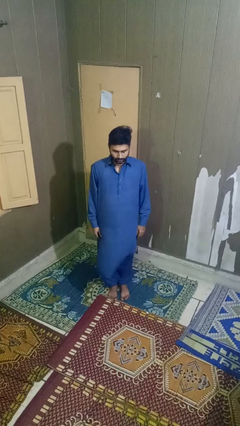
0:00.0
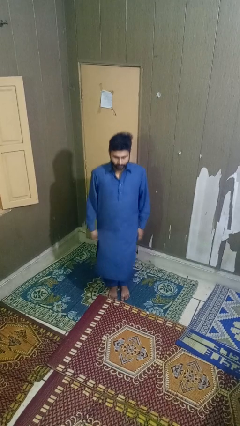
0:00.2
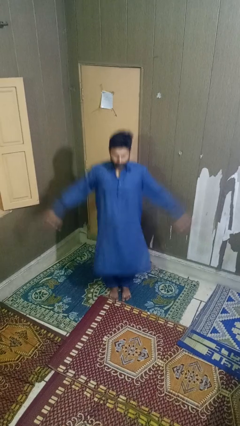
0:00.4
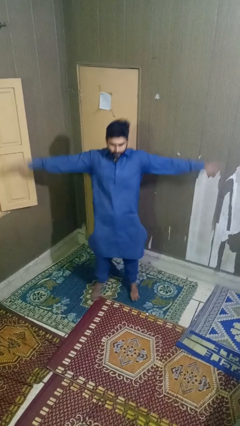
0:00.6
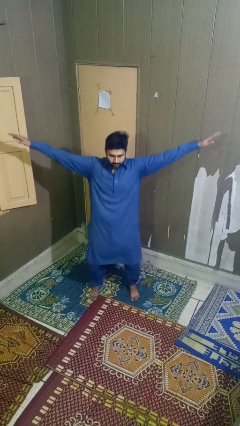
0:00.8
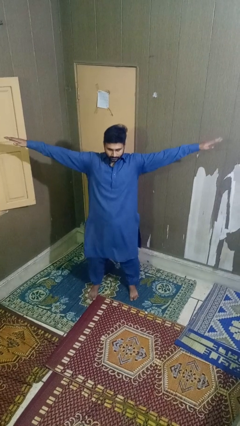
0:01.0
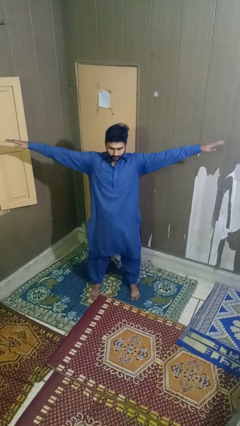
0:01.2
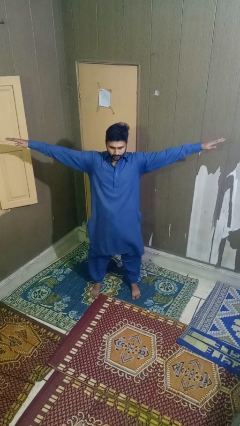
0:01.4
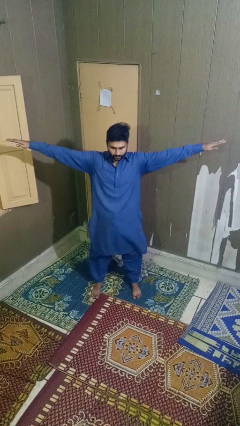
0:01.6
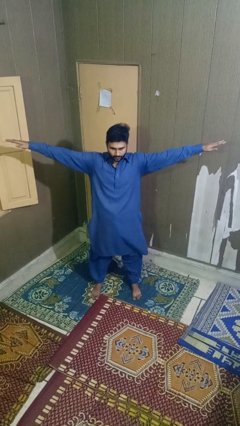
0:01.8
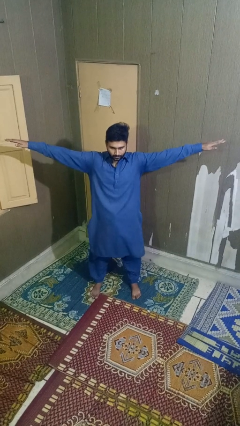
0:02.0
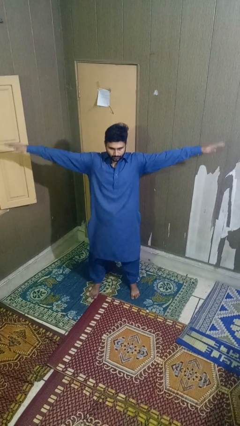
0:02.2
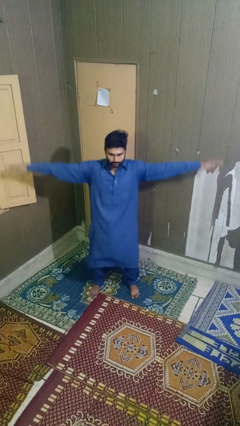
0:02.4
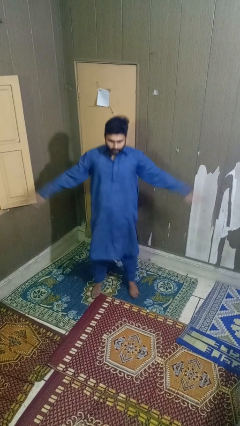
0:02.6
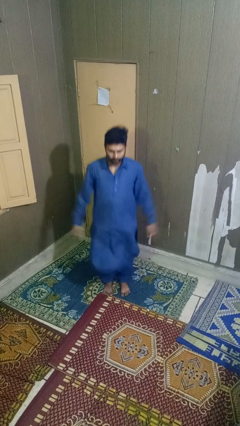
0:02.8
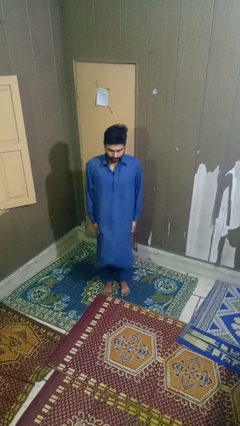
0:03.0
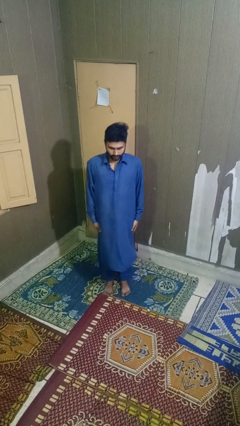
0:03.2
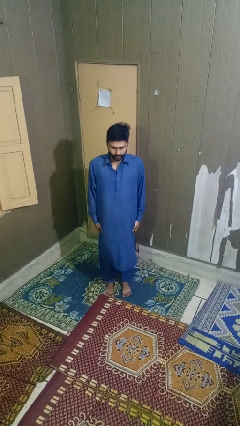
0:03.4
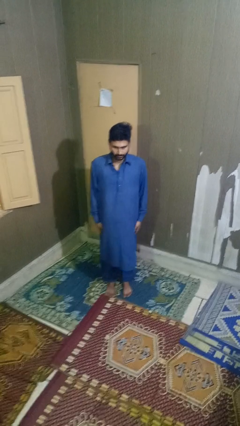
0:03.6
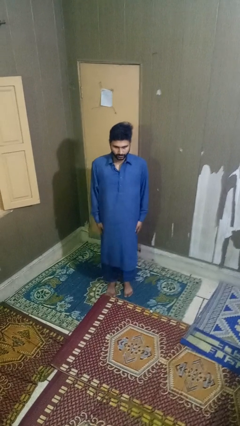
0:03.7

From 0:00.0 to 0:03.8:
person exercises with jumping jacks

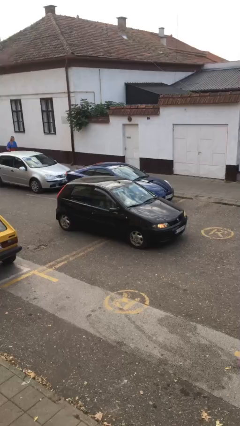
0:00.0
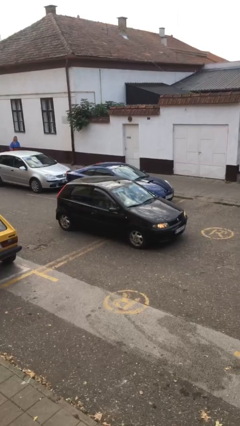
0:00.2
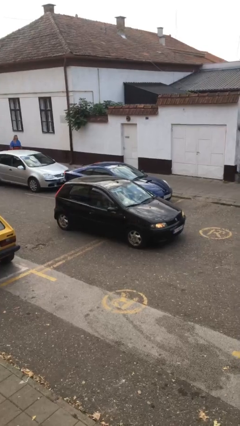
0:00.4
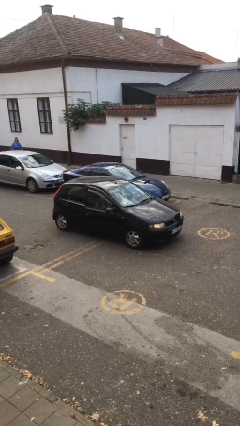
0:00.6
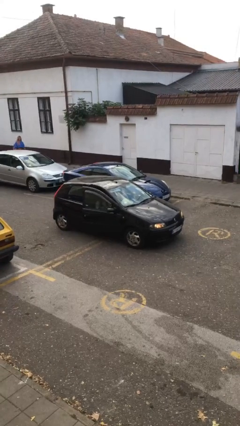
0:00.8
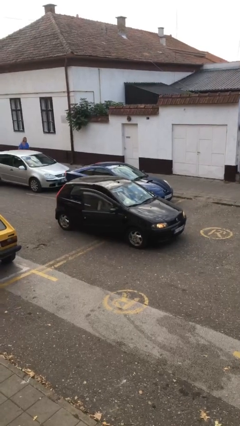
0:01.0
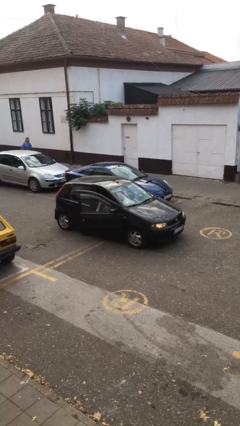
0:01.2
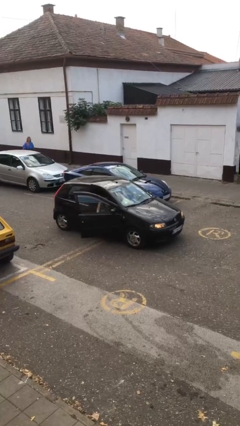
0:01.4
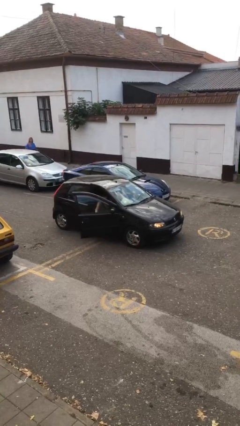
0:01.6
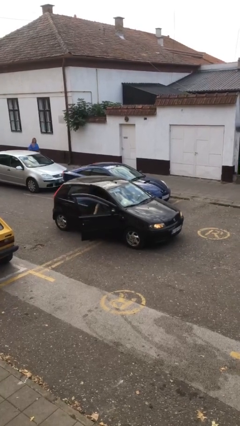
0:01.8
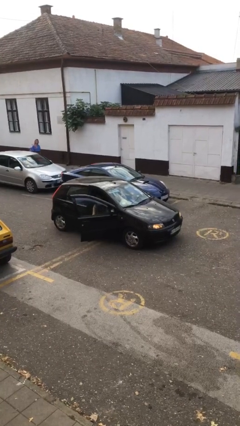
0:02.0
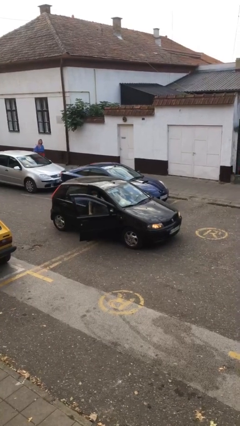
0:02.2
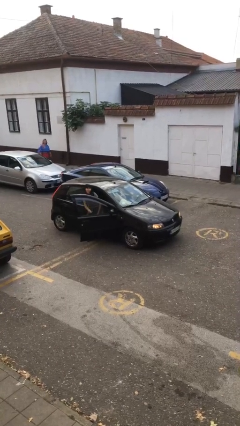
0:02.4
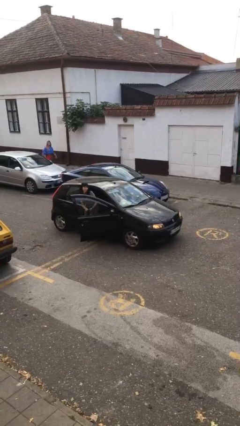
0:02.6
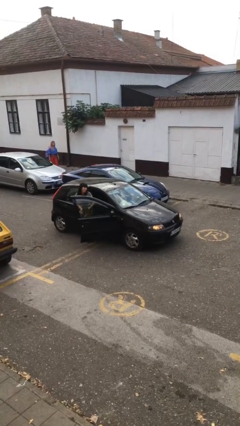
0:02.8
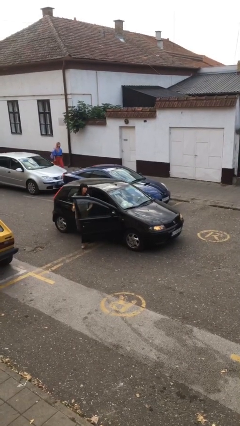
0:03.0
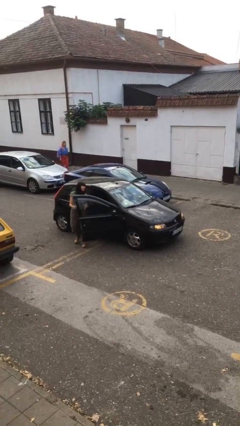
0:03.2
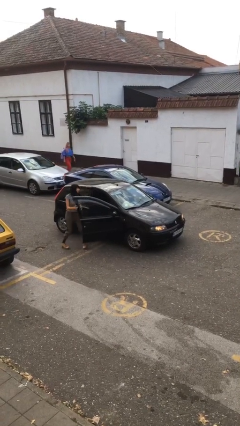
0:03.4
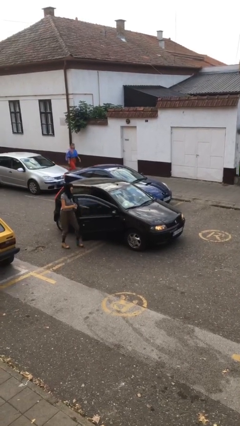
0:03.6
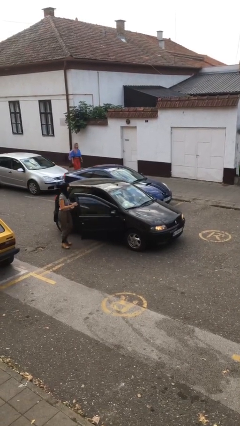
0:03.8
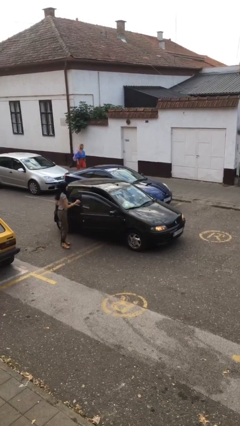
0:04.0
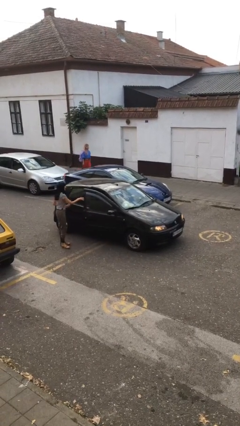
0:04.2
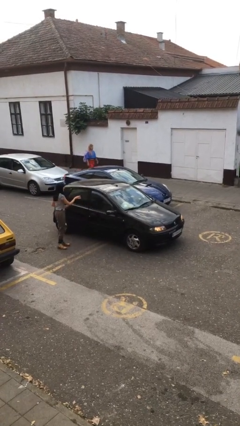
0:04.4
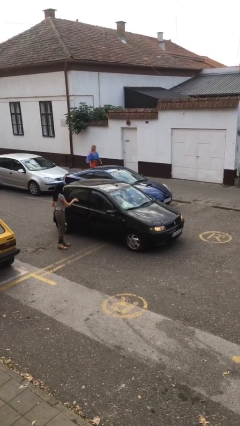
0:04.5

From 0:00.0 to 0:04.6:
car drops off person

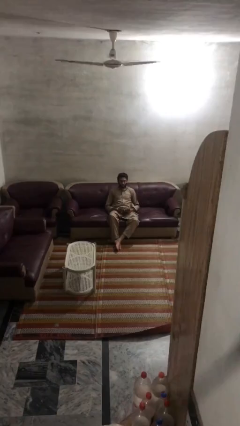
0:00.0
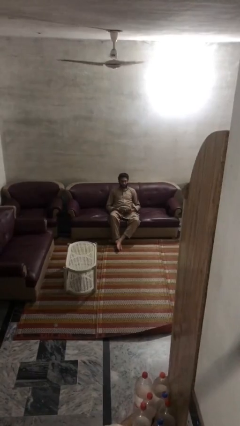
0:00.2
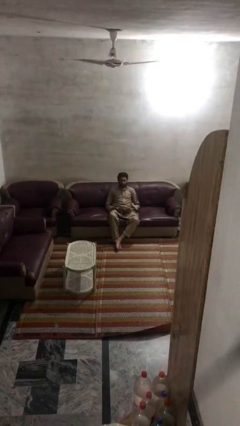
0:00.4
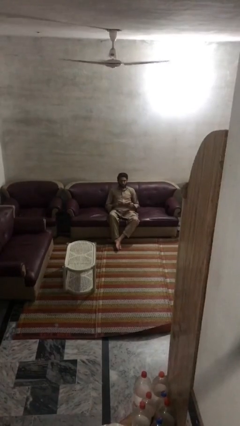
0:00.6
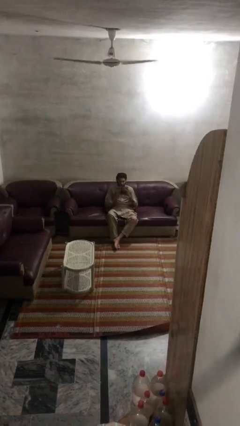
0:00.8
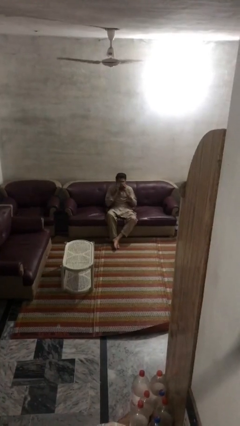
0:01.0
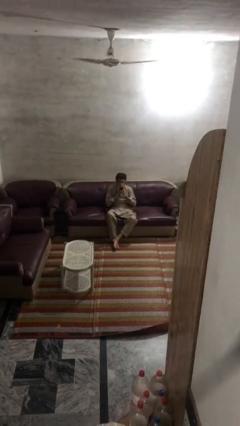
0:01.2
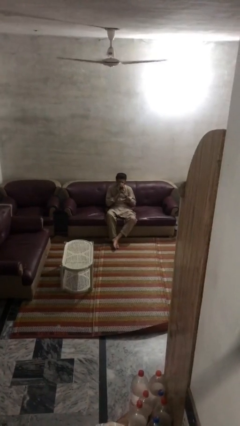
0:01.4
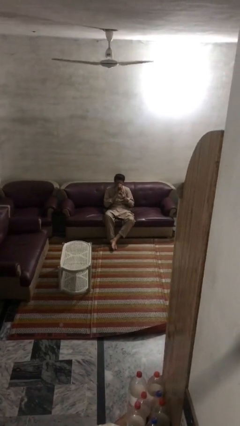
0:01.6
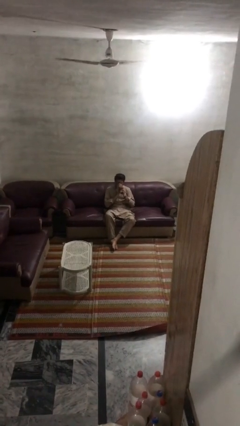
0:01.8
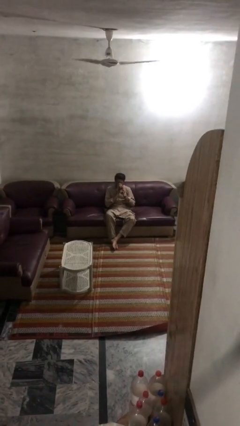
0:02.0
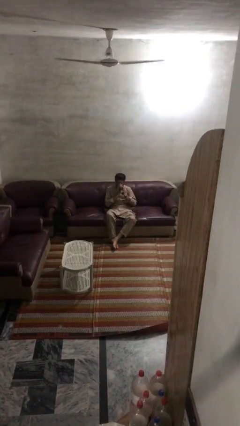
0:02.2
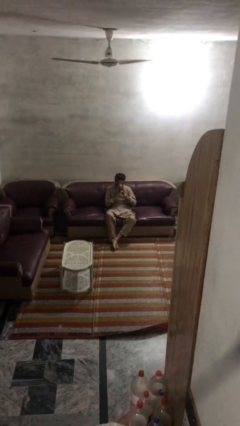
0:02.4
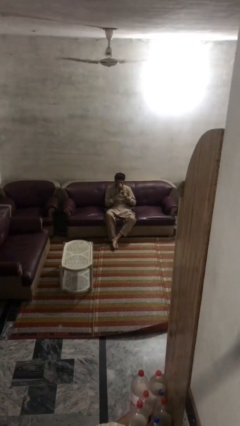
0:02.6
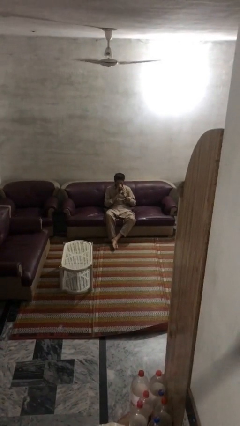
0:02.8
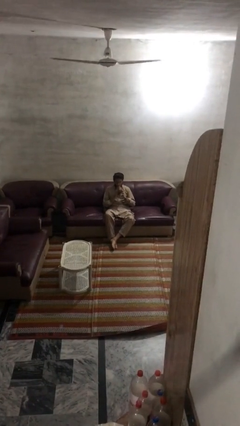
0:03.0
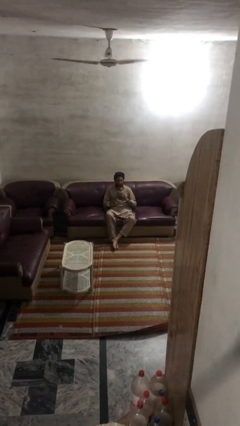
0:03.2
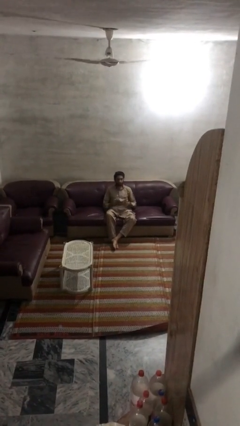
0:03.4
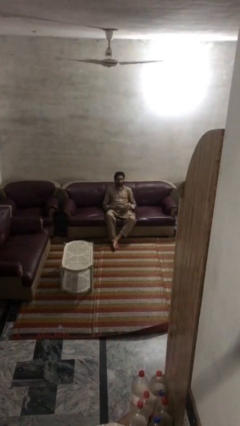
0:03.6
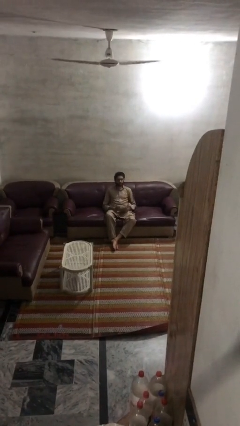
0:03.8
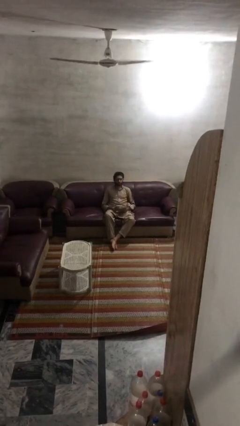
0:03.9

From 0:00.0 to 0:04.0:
person blows nose

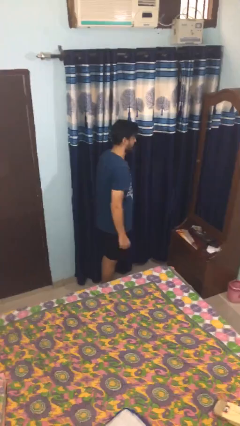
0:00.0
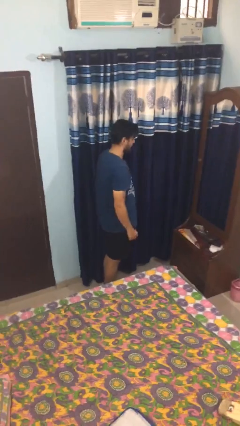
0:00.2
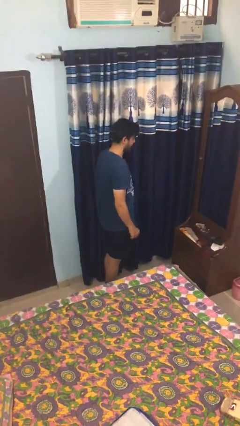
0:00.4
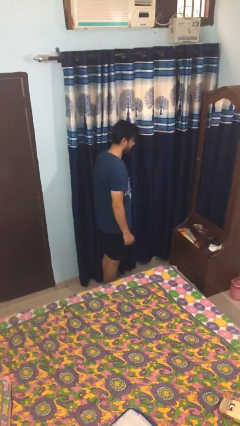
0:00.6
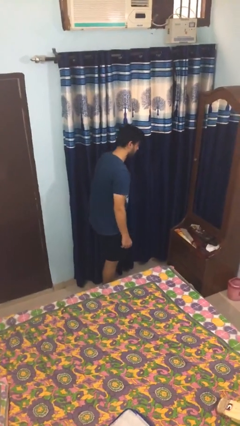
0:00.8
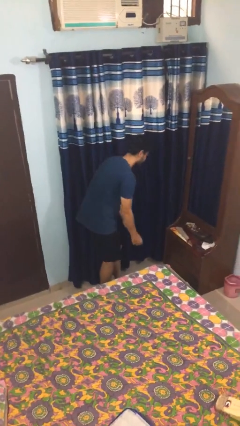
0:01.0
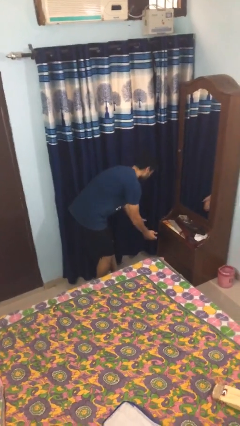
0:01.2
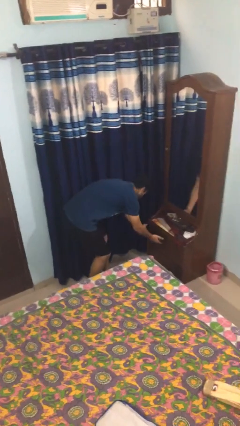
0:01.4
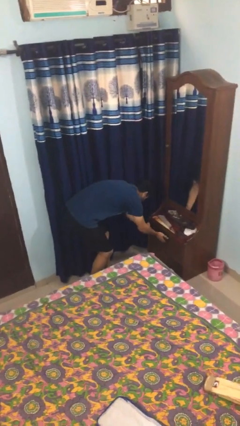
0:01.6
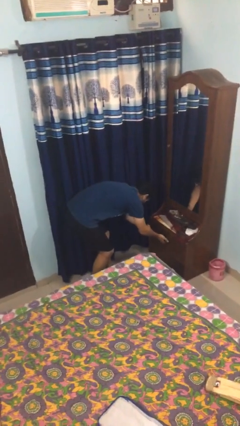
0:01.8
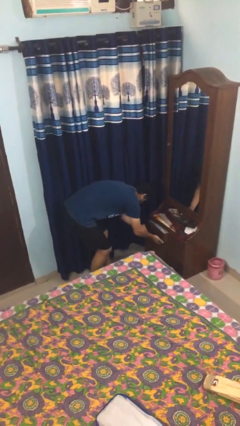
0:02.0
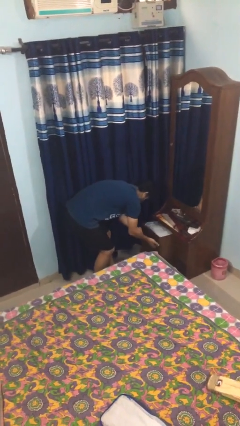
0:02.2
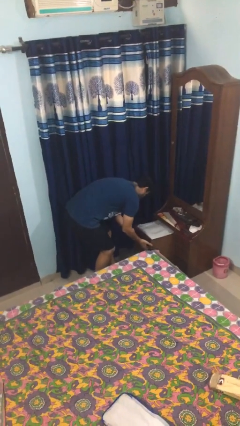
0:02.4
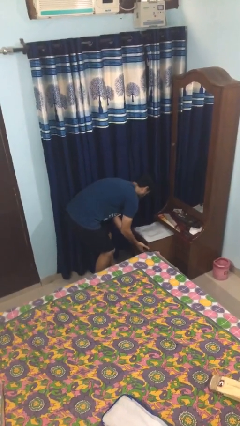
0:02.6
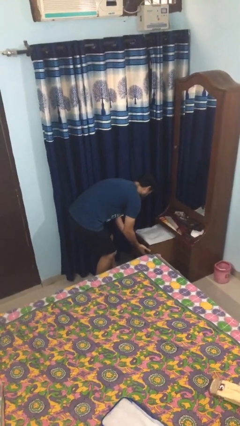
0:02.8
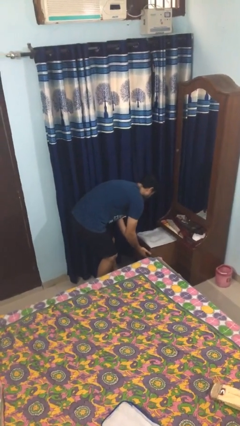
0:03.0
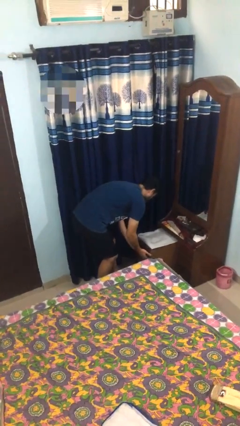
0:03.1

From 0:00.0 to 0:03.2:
person opens dresser drawer

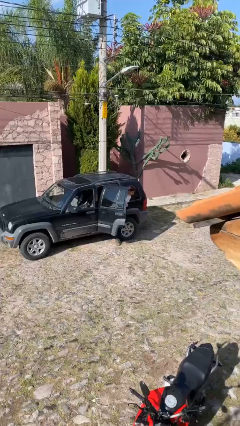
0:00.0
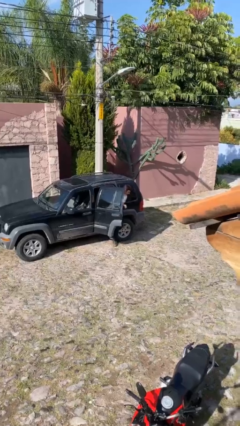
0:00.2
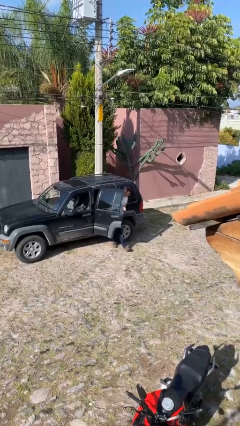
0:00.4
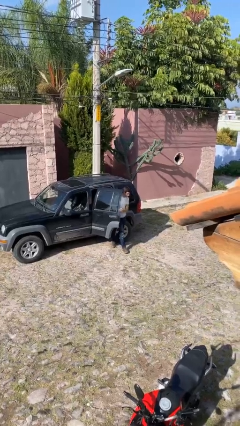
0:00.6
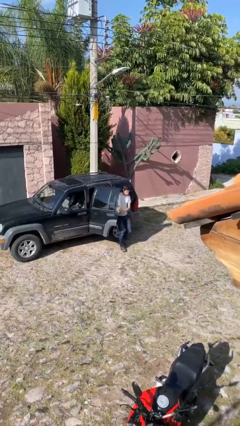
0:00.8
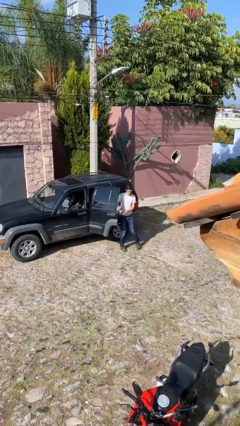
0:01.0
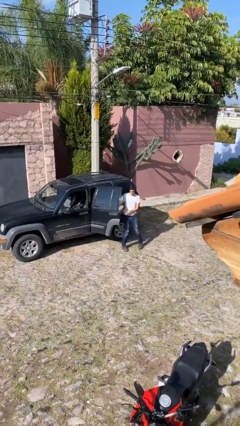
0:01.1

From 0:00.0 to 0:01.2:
person exits car

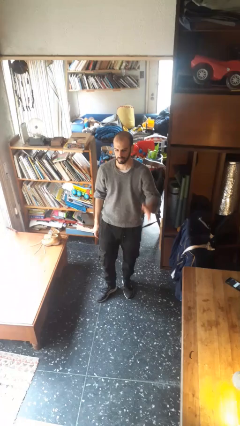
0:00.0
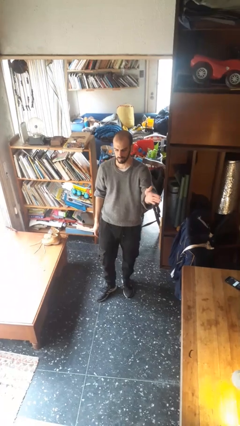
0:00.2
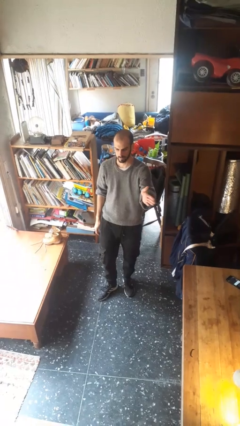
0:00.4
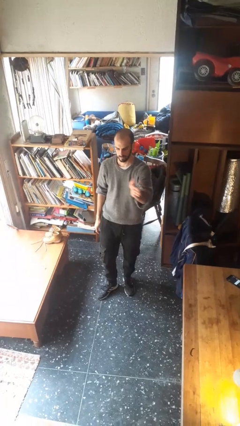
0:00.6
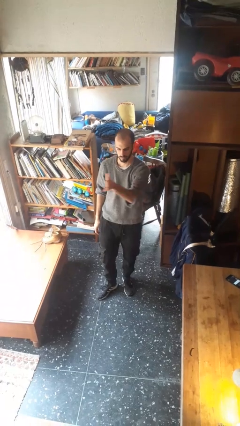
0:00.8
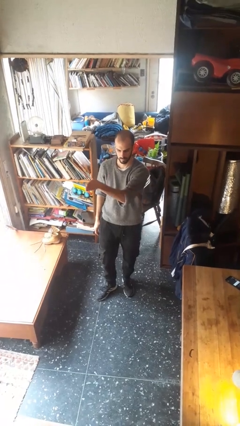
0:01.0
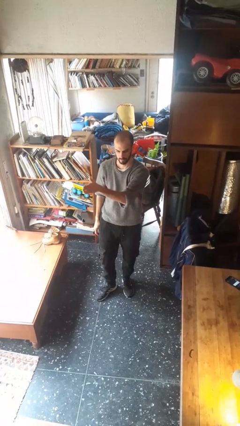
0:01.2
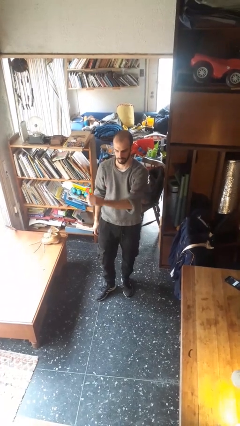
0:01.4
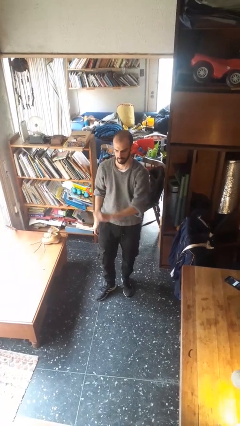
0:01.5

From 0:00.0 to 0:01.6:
person gestures swipe right
